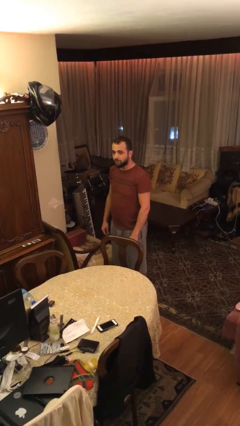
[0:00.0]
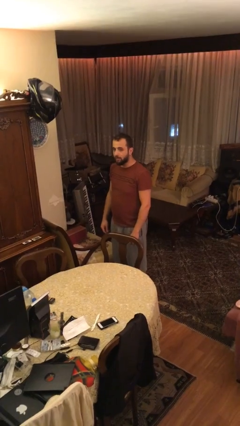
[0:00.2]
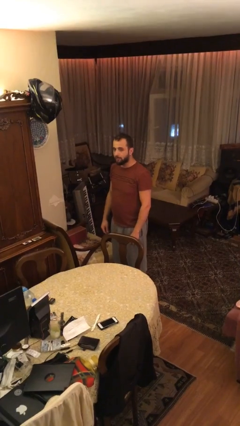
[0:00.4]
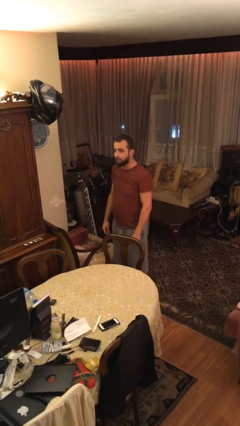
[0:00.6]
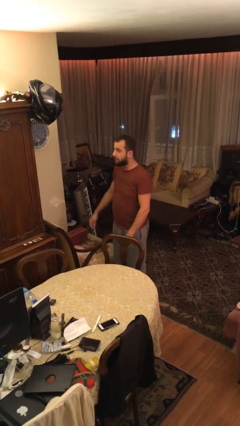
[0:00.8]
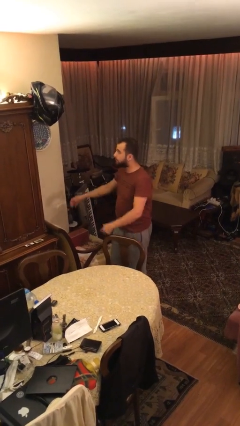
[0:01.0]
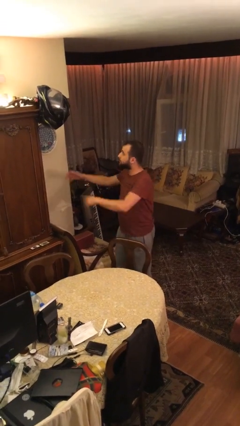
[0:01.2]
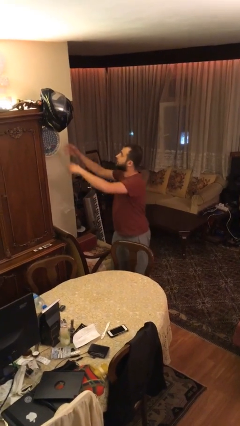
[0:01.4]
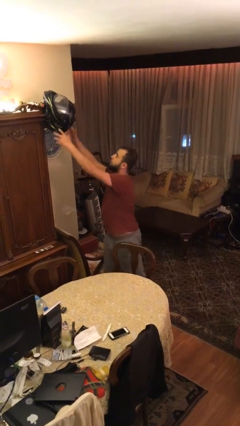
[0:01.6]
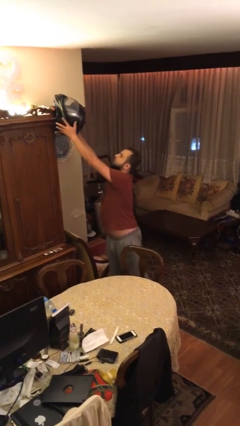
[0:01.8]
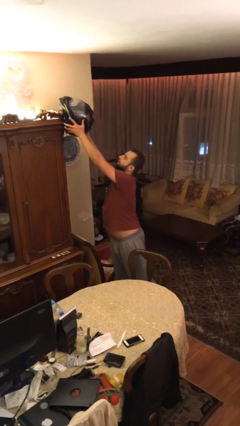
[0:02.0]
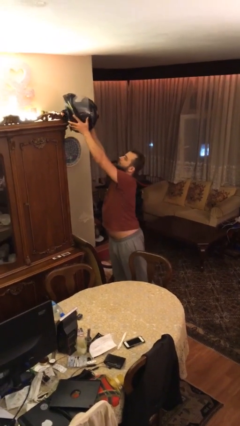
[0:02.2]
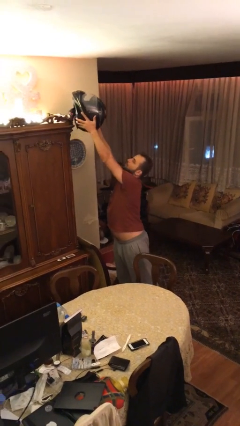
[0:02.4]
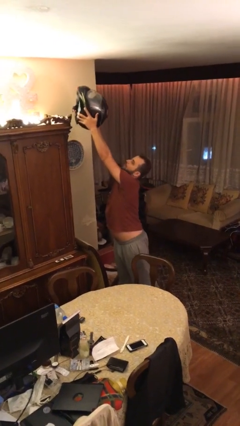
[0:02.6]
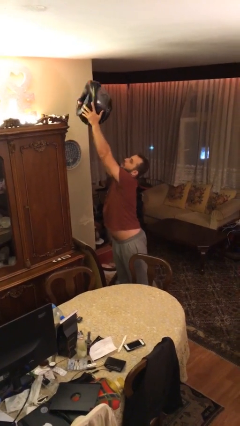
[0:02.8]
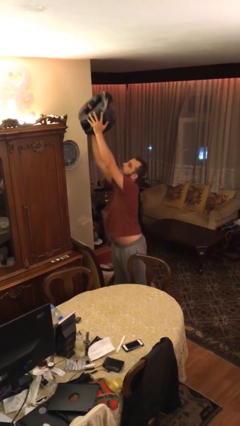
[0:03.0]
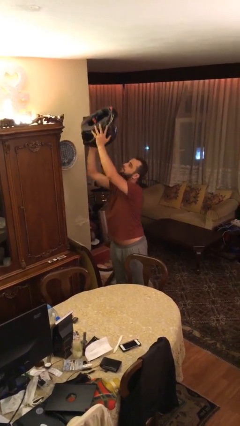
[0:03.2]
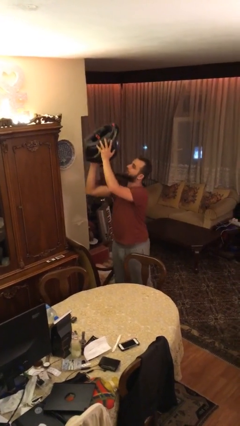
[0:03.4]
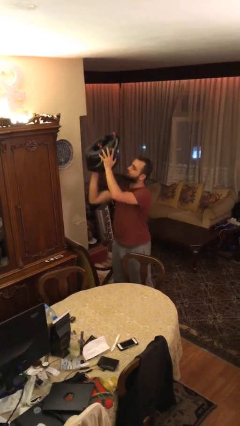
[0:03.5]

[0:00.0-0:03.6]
person picks up object from shelf

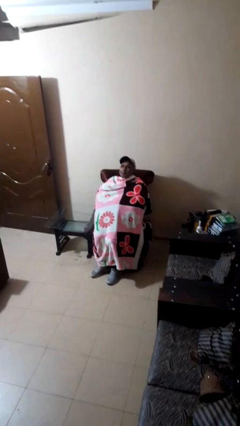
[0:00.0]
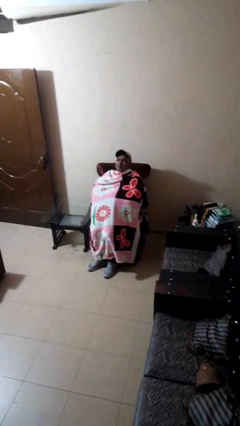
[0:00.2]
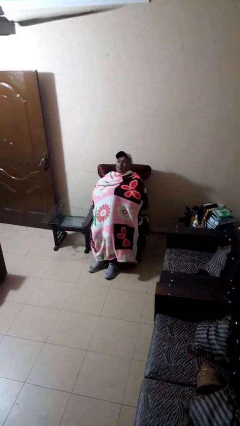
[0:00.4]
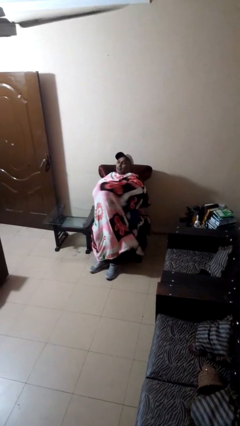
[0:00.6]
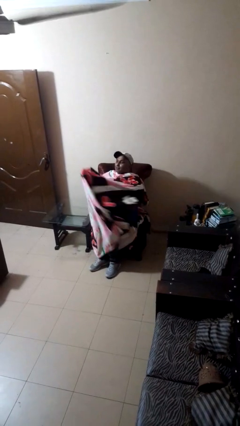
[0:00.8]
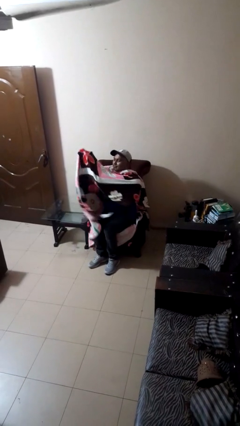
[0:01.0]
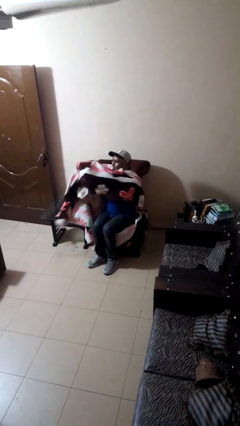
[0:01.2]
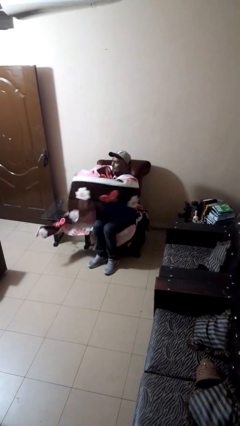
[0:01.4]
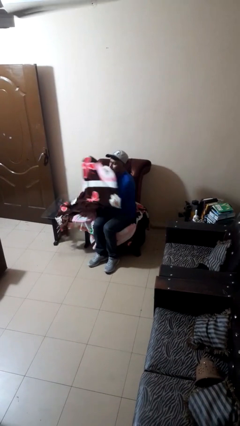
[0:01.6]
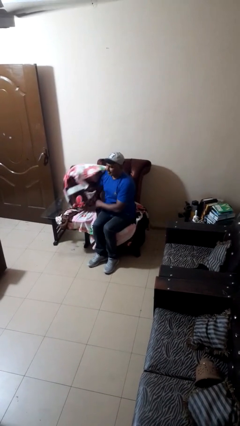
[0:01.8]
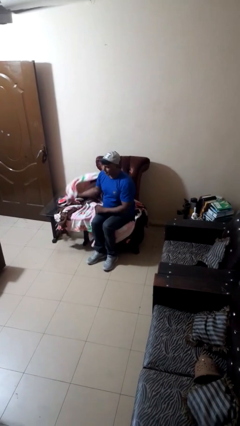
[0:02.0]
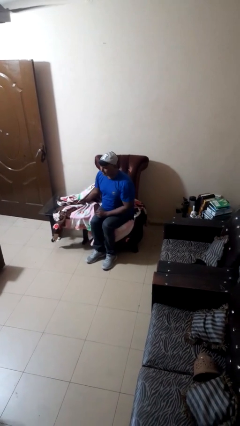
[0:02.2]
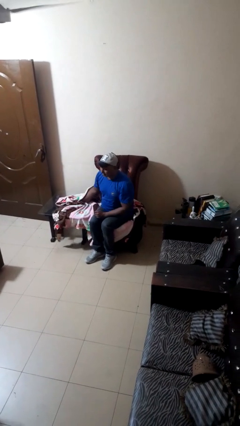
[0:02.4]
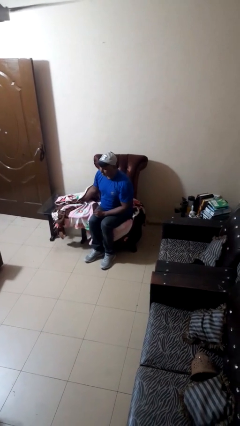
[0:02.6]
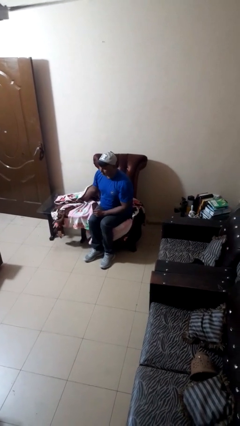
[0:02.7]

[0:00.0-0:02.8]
person uncovers with blanket

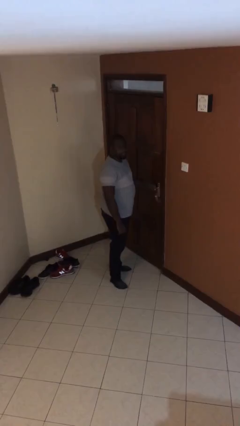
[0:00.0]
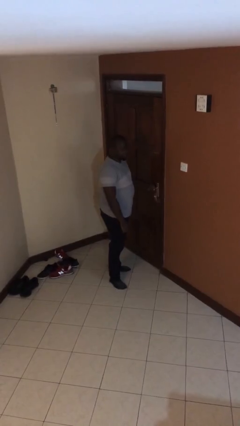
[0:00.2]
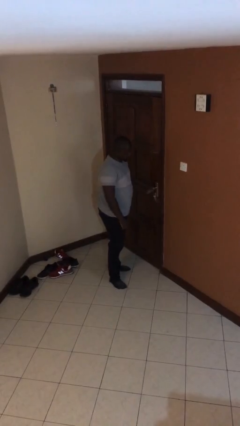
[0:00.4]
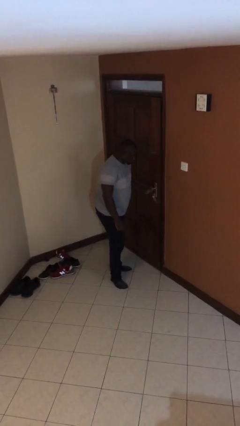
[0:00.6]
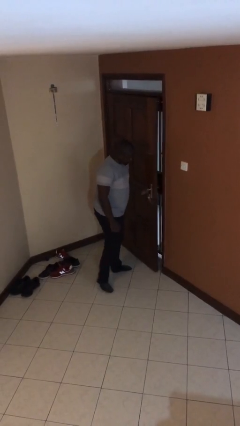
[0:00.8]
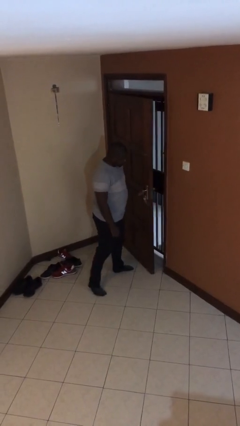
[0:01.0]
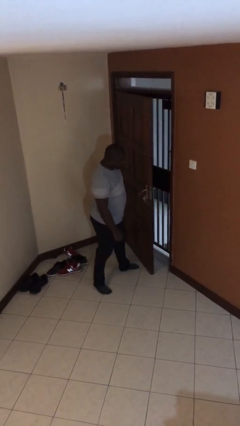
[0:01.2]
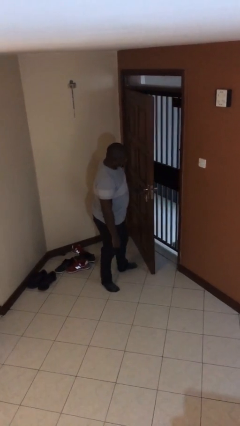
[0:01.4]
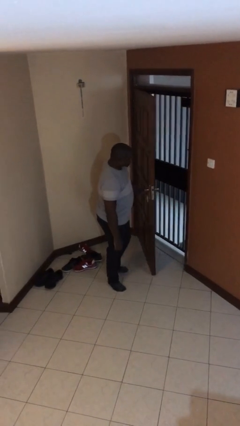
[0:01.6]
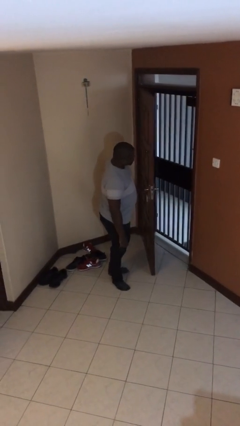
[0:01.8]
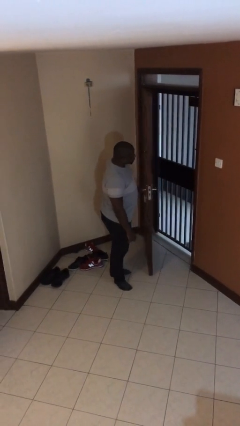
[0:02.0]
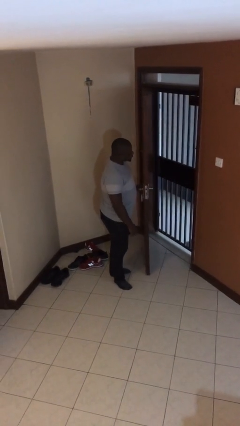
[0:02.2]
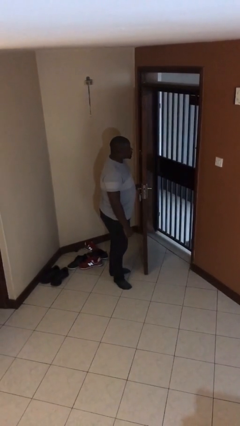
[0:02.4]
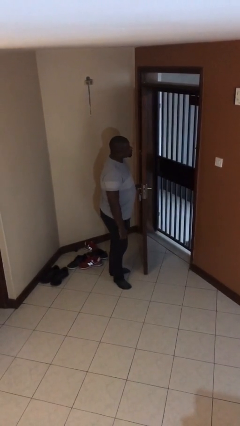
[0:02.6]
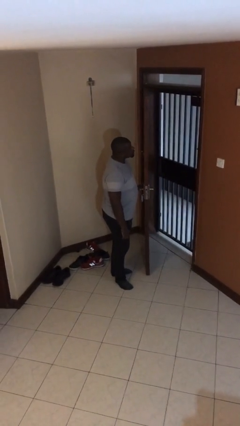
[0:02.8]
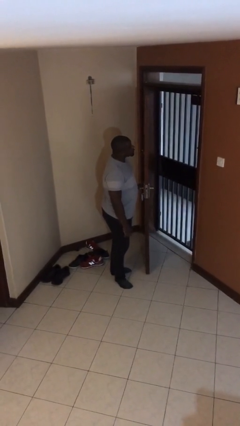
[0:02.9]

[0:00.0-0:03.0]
person opens facility door

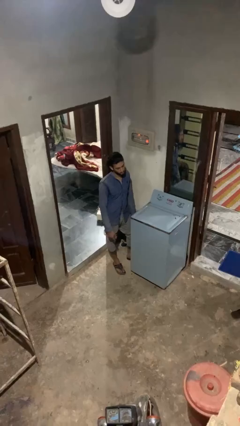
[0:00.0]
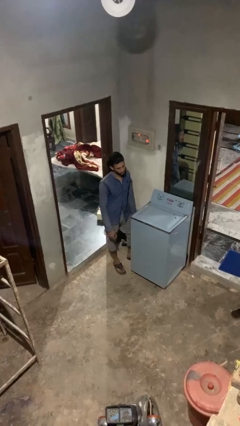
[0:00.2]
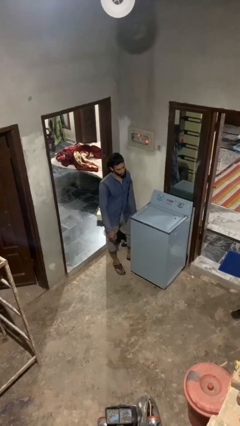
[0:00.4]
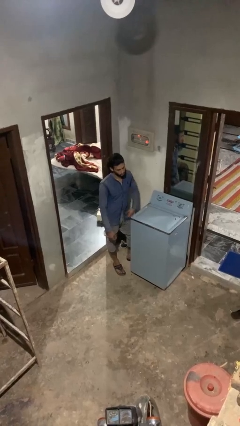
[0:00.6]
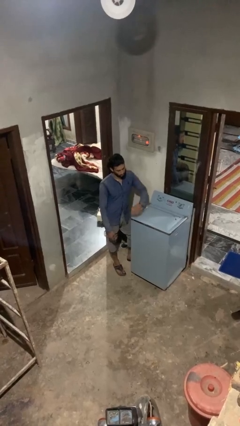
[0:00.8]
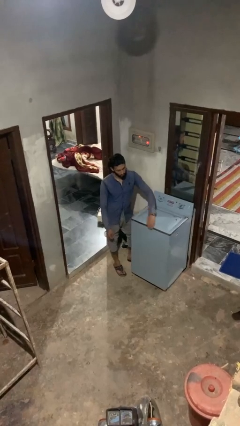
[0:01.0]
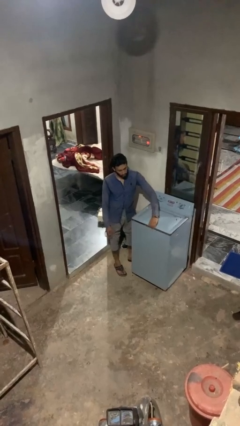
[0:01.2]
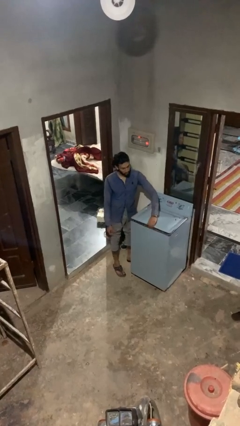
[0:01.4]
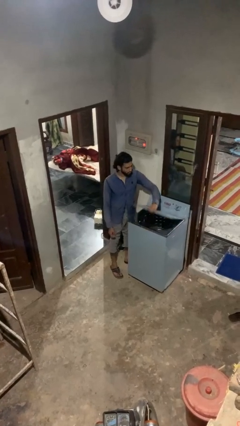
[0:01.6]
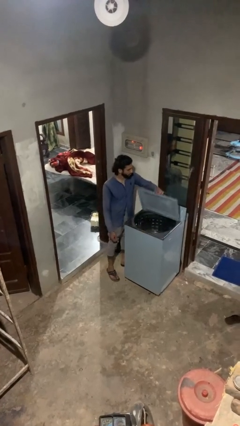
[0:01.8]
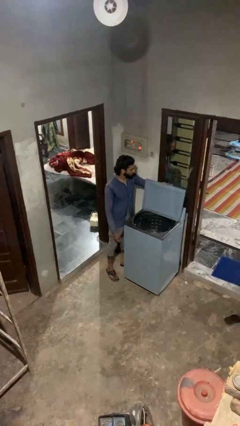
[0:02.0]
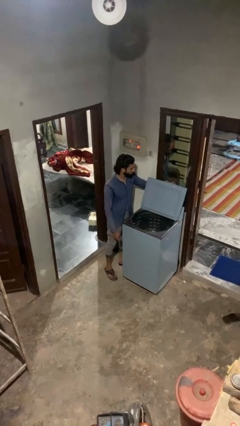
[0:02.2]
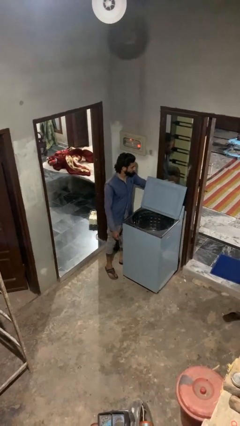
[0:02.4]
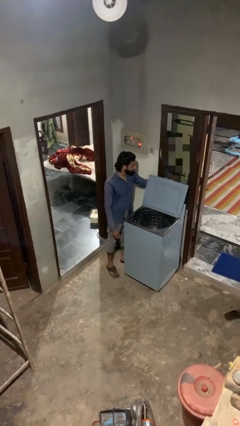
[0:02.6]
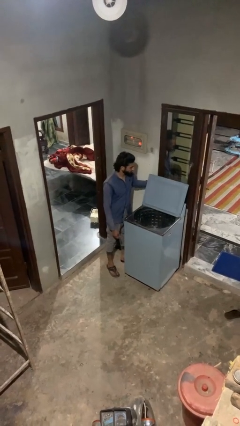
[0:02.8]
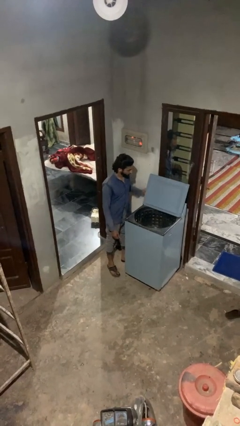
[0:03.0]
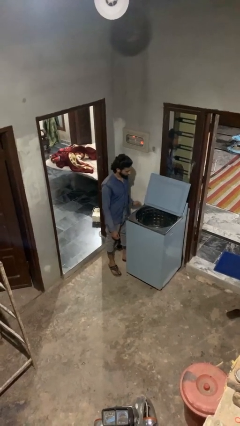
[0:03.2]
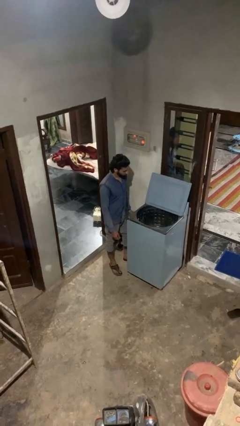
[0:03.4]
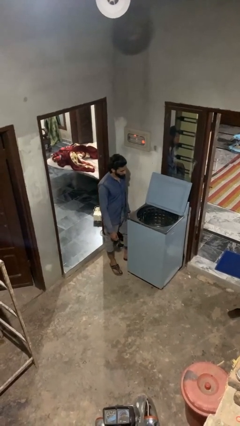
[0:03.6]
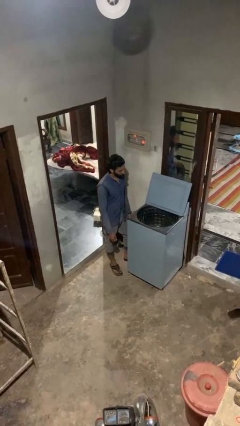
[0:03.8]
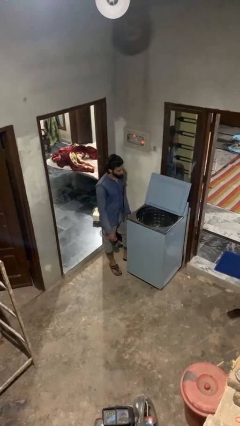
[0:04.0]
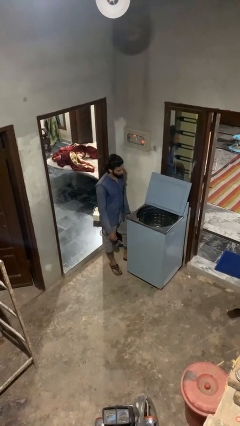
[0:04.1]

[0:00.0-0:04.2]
person opens clothes washer

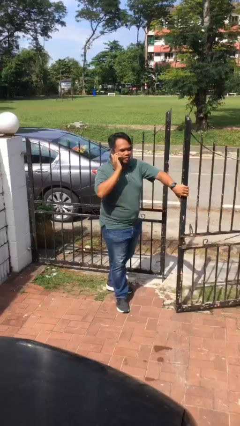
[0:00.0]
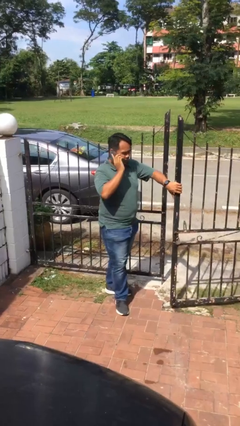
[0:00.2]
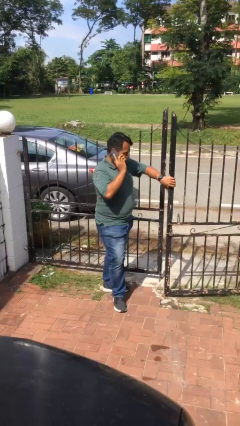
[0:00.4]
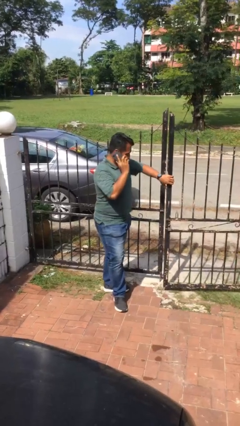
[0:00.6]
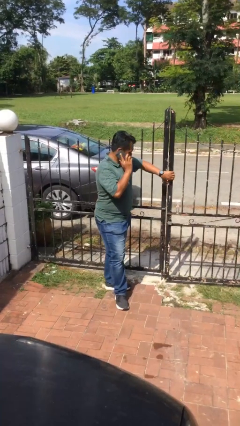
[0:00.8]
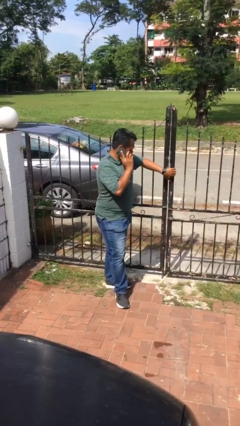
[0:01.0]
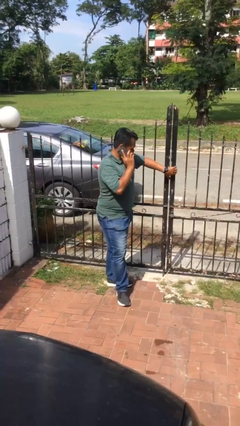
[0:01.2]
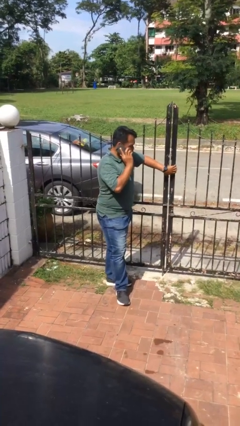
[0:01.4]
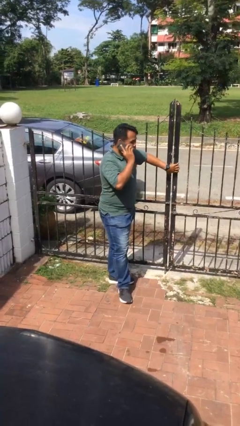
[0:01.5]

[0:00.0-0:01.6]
person closes facility door

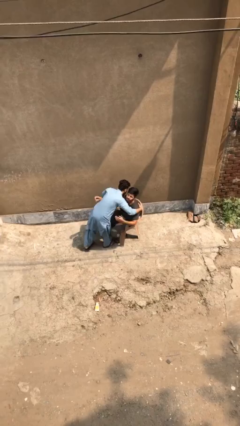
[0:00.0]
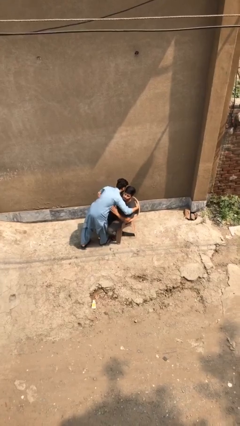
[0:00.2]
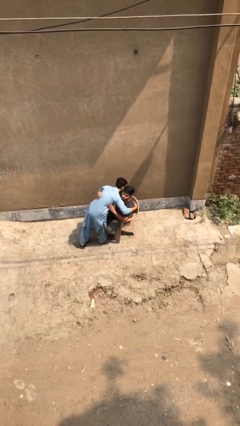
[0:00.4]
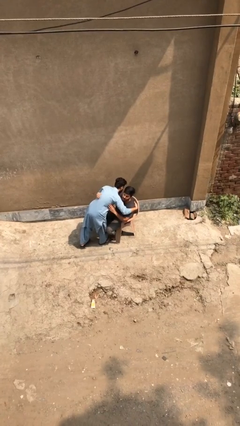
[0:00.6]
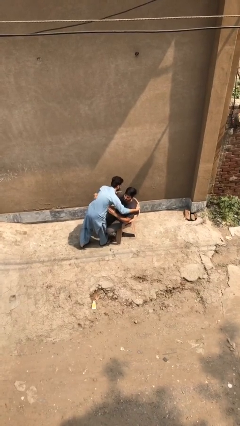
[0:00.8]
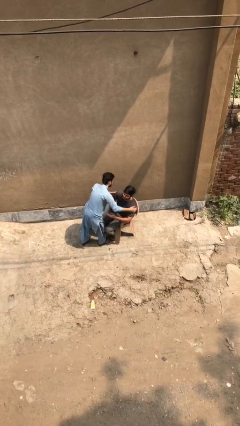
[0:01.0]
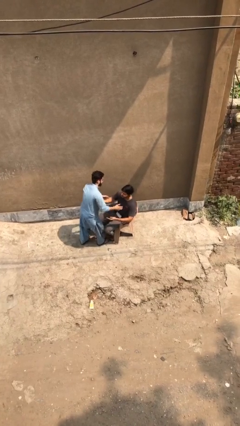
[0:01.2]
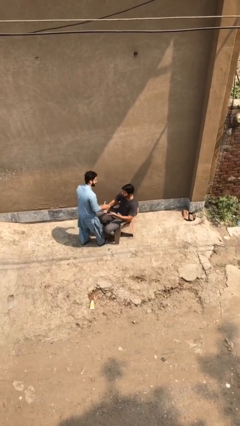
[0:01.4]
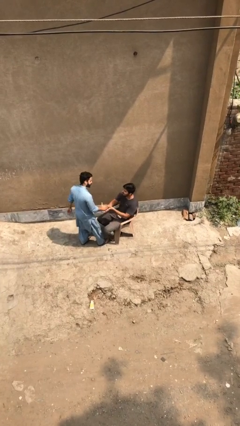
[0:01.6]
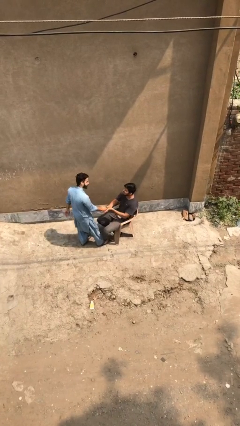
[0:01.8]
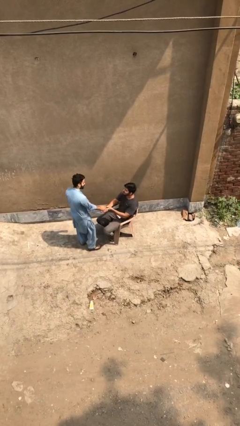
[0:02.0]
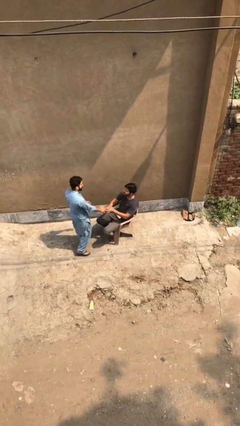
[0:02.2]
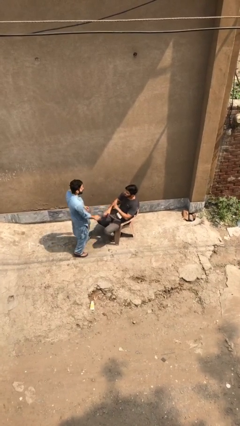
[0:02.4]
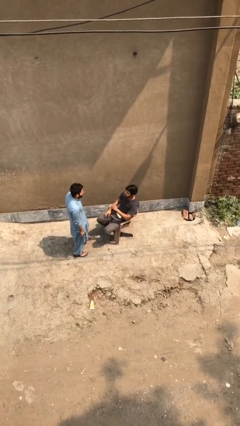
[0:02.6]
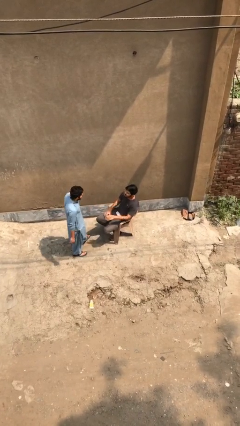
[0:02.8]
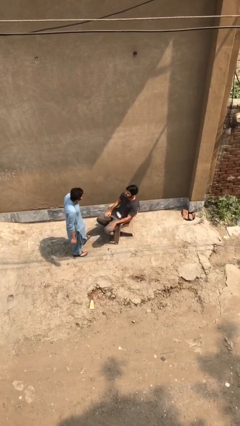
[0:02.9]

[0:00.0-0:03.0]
person embraces person
